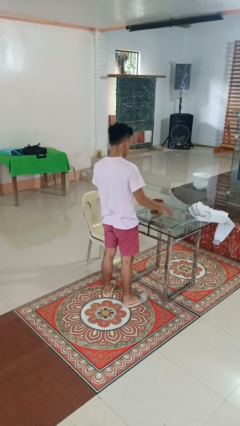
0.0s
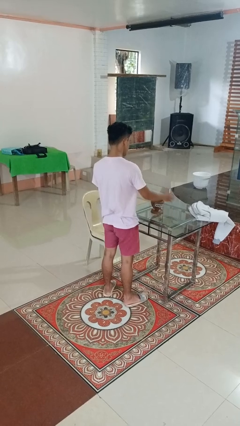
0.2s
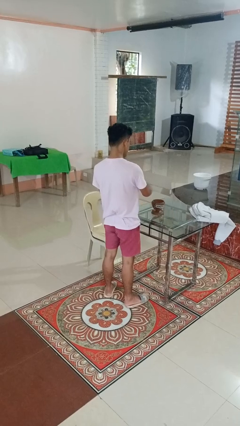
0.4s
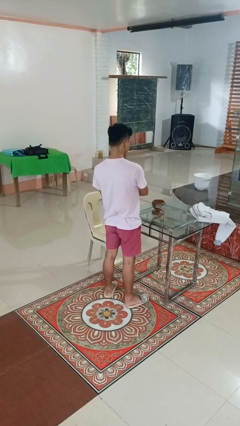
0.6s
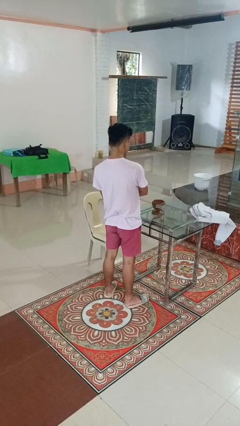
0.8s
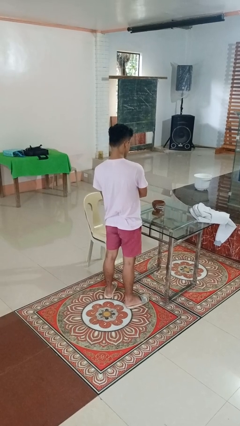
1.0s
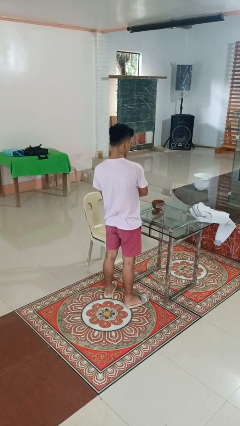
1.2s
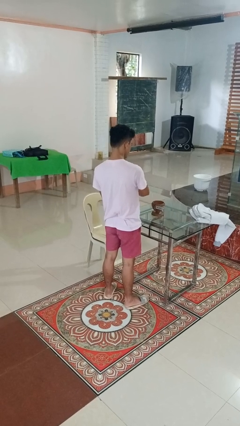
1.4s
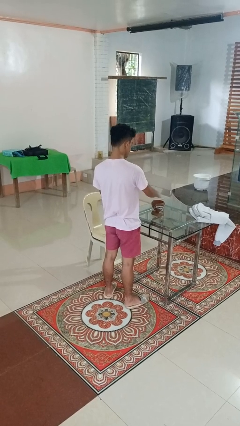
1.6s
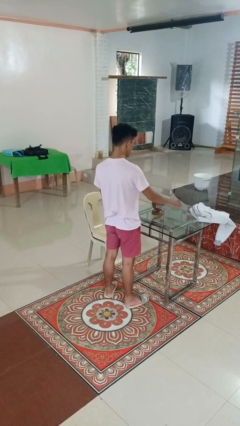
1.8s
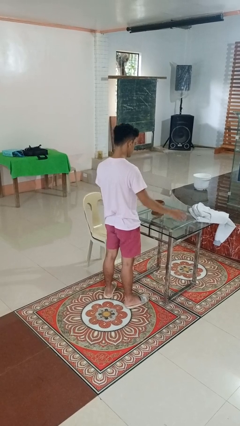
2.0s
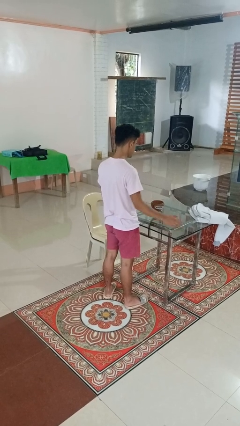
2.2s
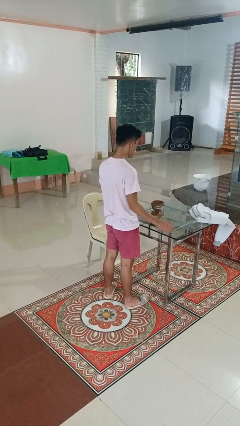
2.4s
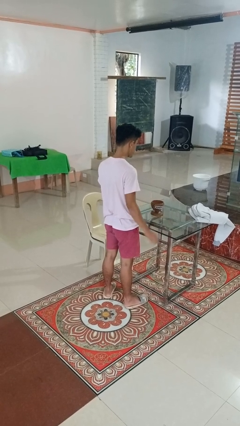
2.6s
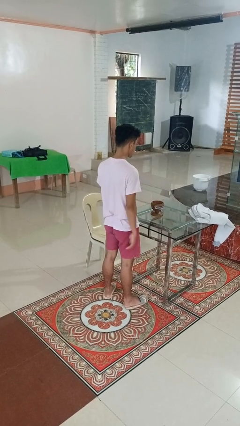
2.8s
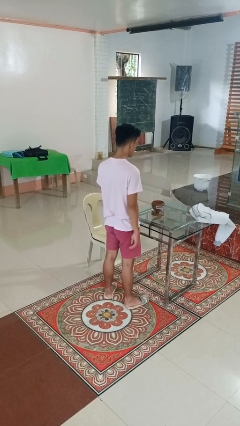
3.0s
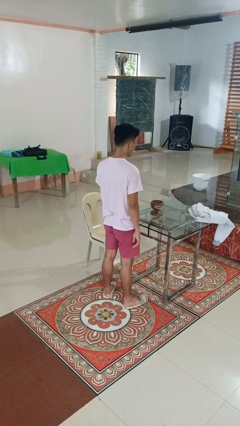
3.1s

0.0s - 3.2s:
person waves hand over object

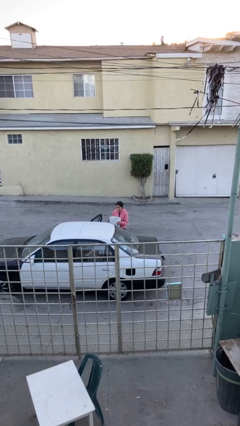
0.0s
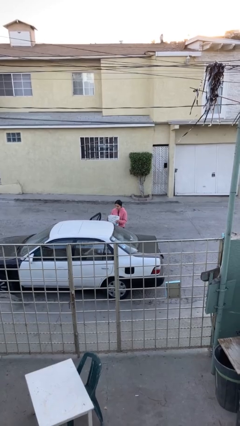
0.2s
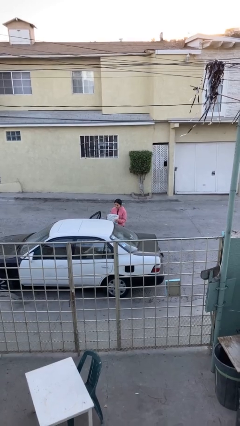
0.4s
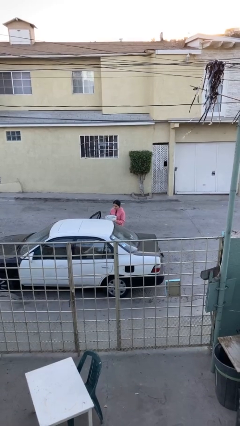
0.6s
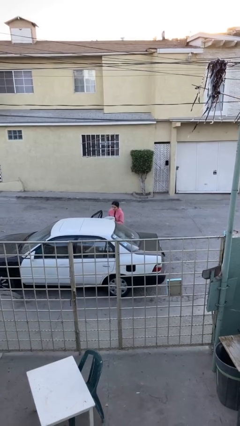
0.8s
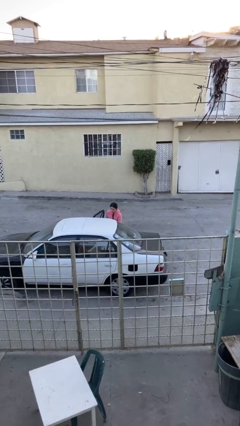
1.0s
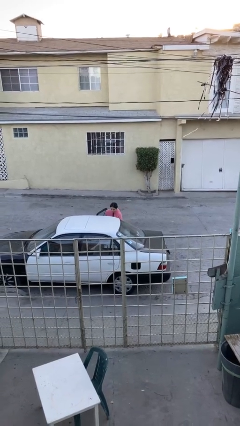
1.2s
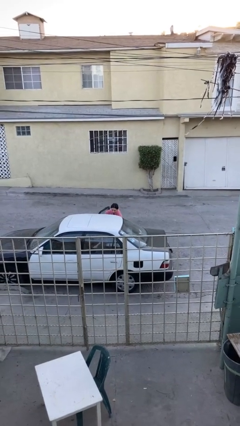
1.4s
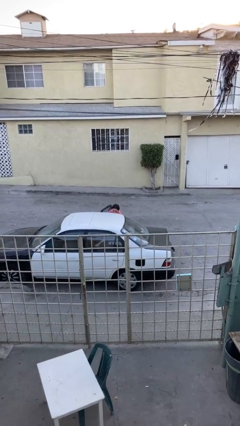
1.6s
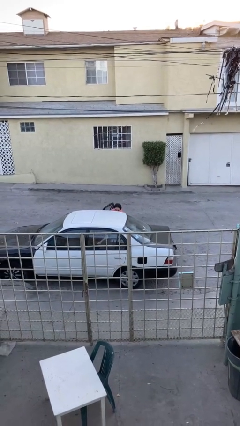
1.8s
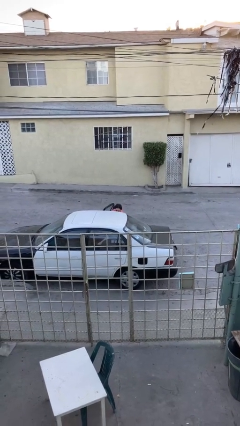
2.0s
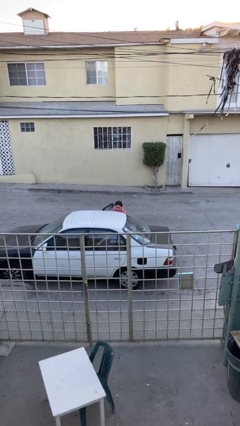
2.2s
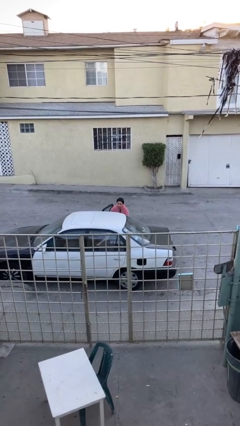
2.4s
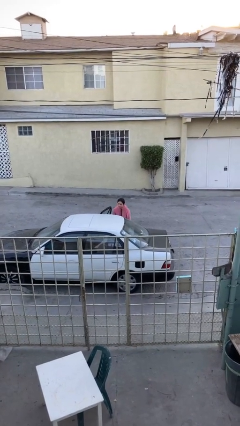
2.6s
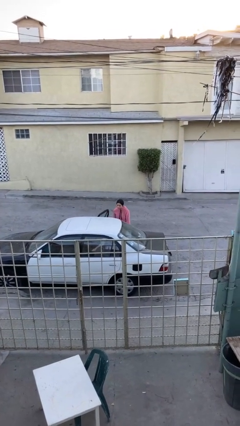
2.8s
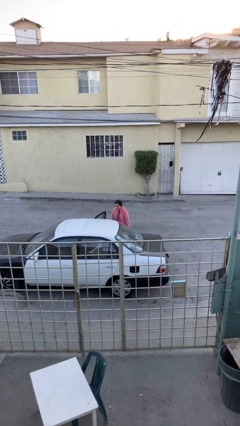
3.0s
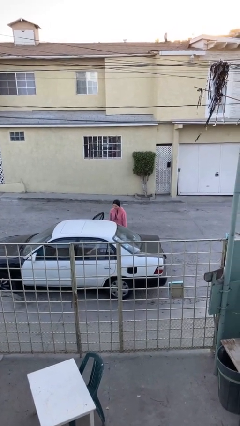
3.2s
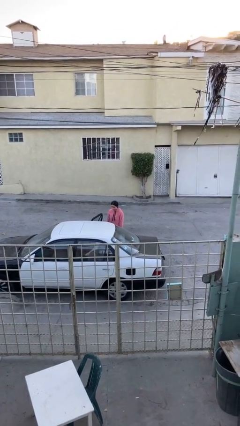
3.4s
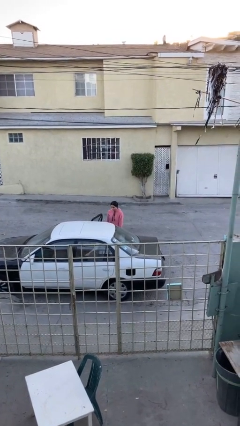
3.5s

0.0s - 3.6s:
person loads car

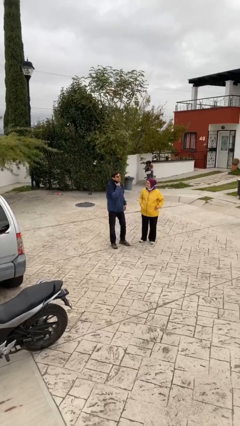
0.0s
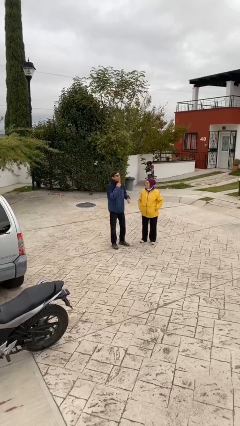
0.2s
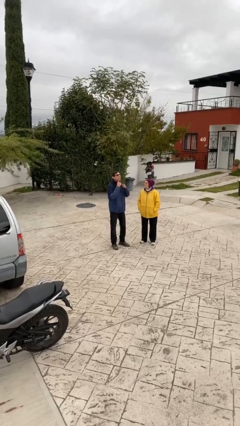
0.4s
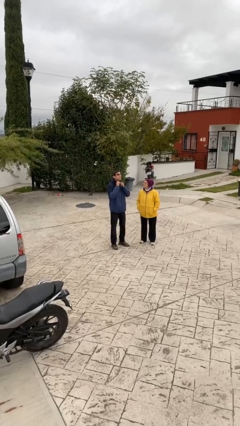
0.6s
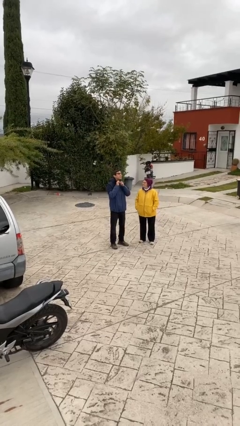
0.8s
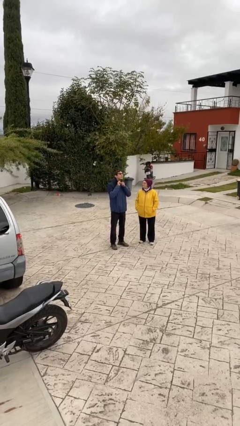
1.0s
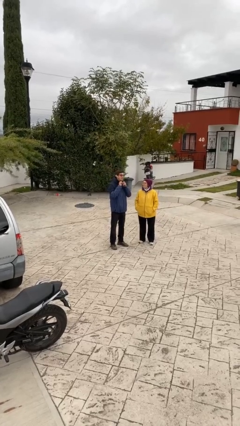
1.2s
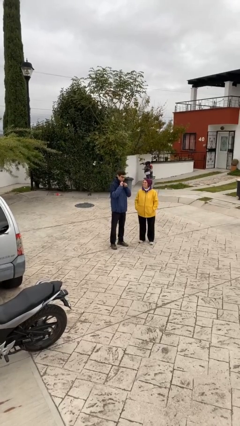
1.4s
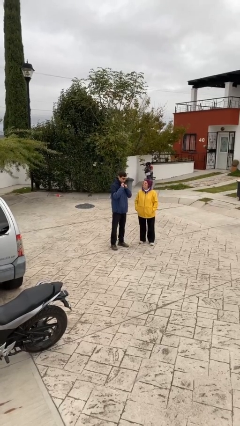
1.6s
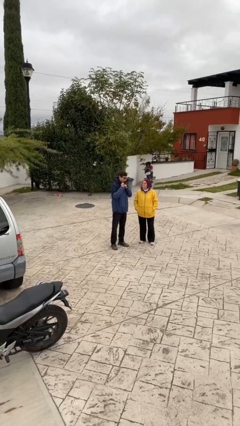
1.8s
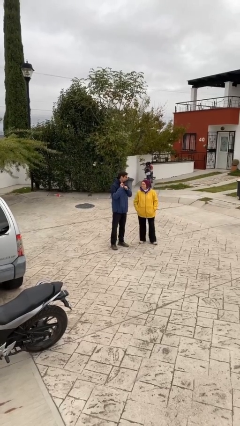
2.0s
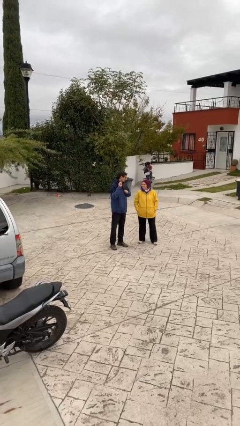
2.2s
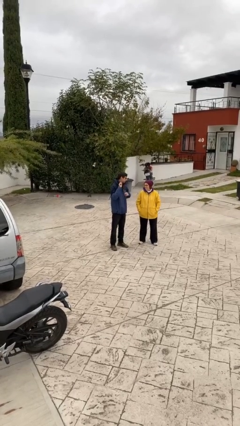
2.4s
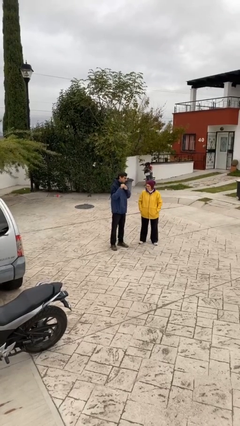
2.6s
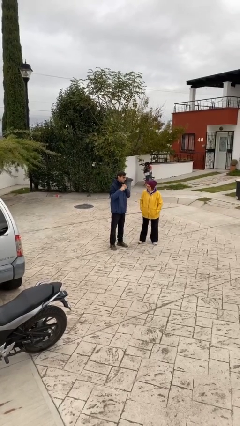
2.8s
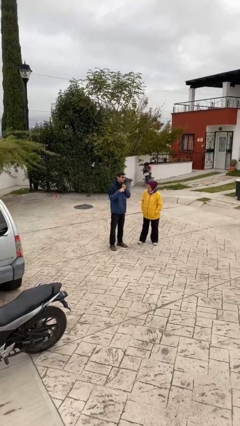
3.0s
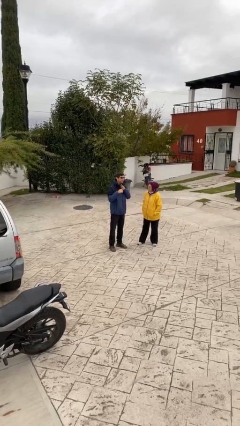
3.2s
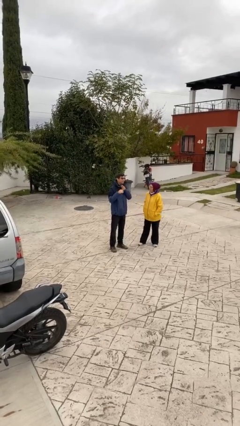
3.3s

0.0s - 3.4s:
person talks to person

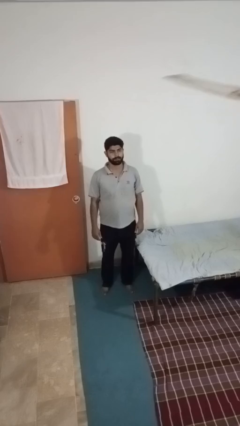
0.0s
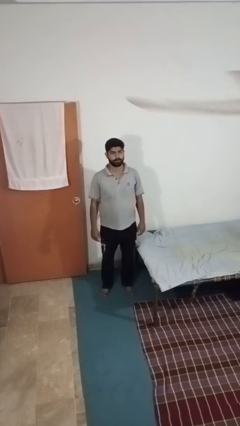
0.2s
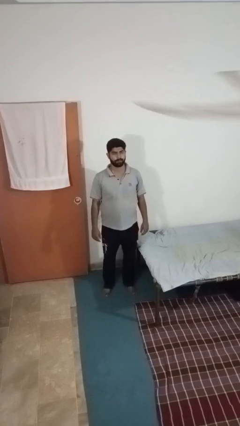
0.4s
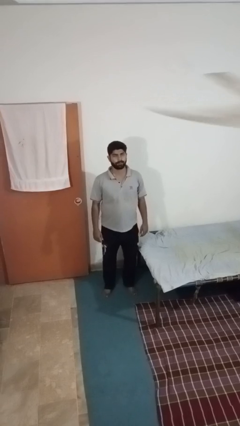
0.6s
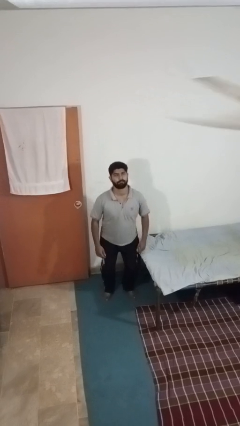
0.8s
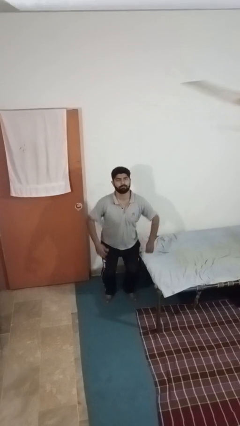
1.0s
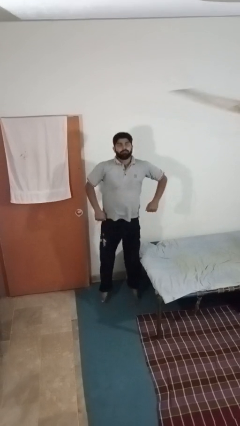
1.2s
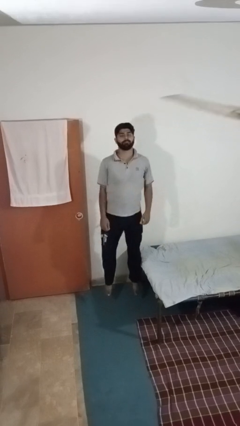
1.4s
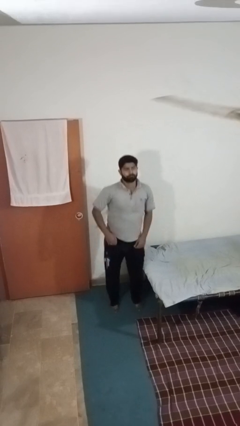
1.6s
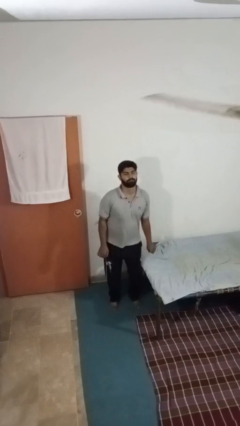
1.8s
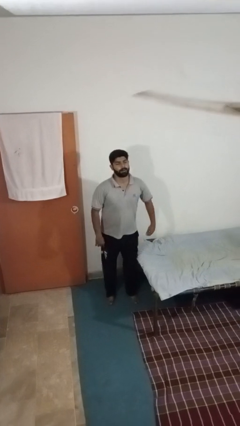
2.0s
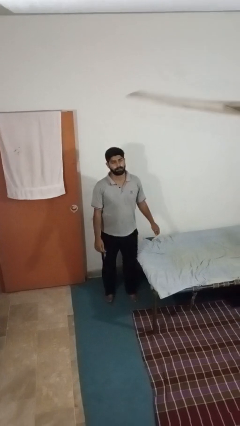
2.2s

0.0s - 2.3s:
person jumps

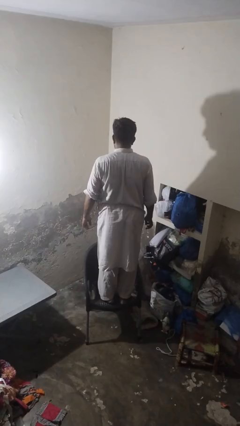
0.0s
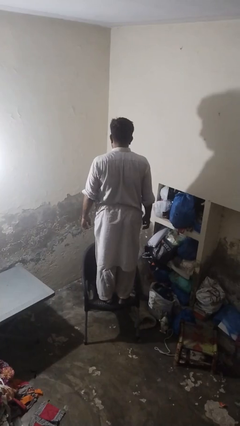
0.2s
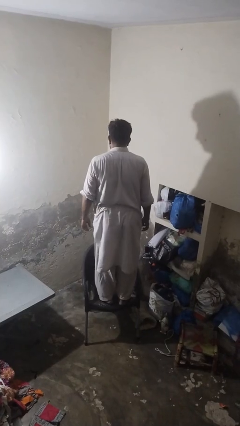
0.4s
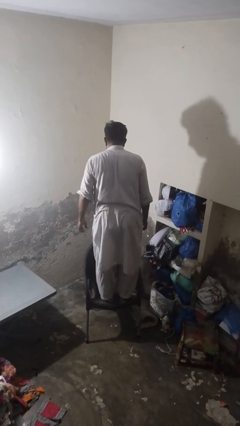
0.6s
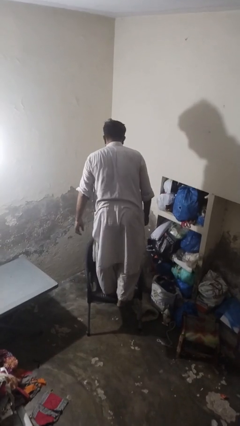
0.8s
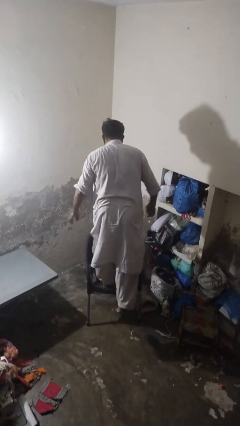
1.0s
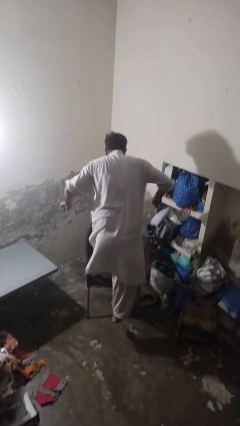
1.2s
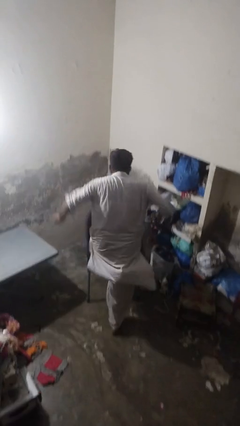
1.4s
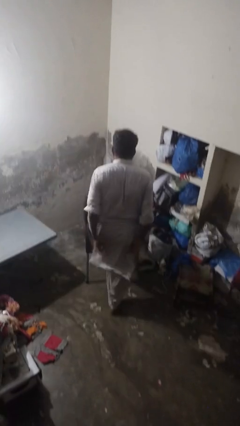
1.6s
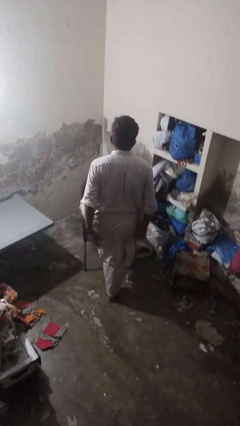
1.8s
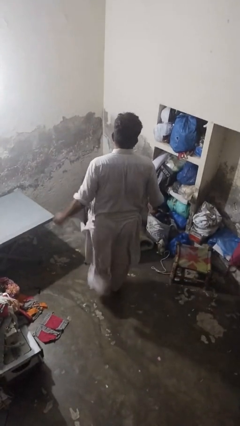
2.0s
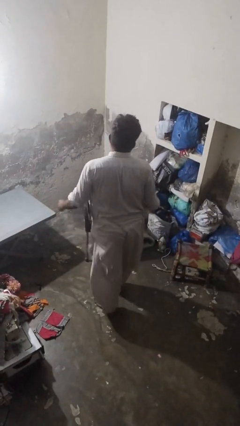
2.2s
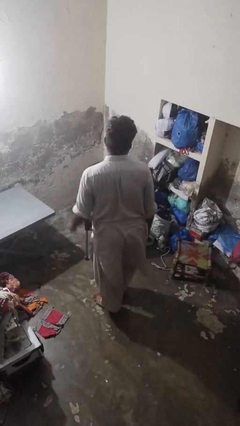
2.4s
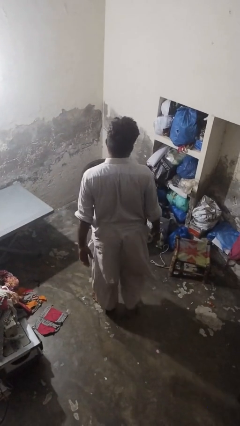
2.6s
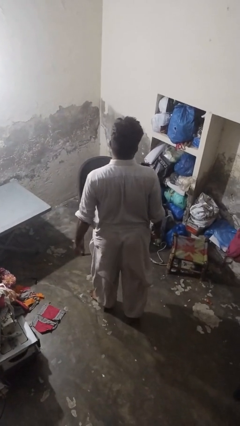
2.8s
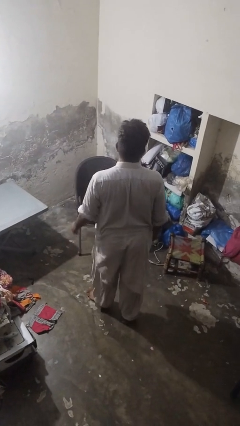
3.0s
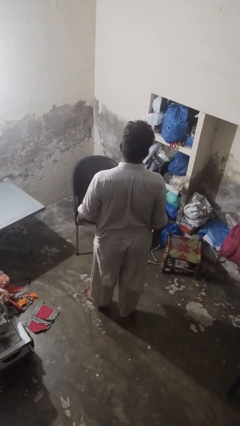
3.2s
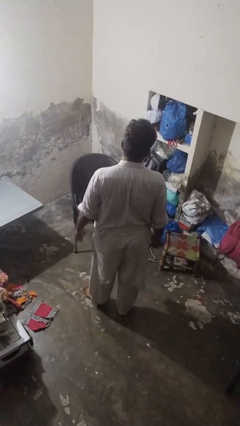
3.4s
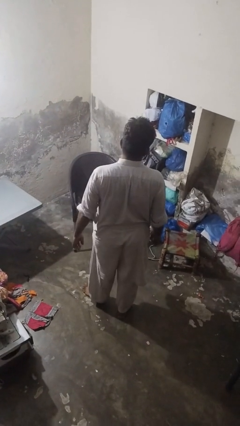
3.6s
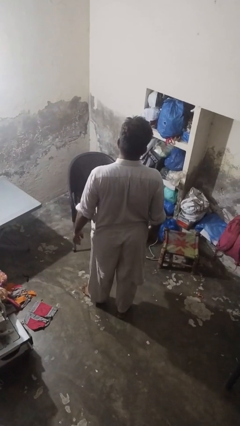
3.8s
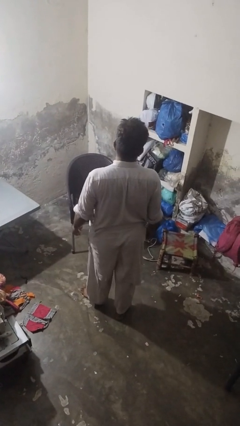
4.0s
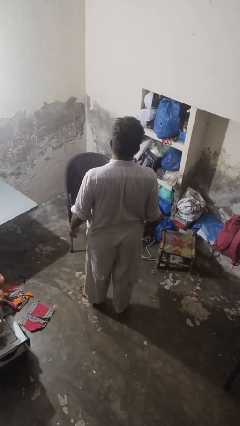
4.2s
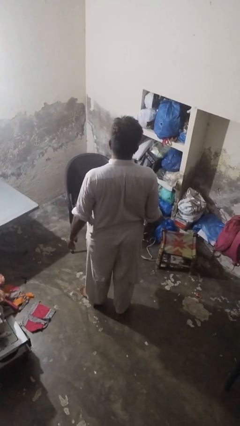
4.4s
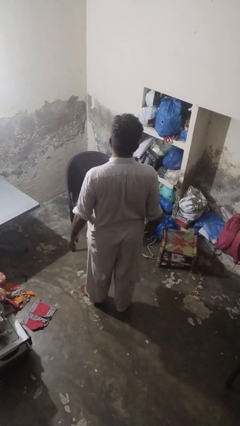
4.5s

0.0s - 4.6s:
person climbs off chair

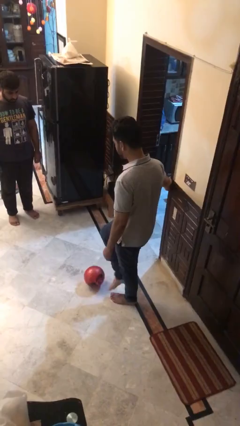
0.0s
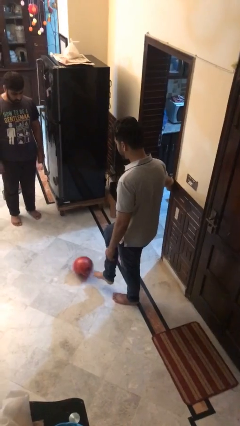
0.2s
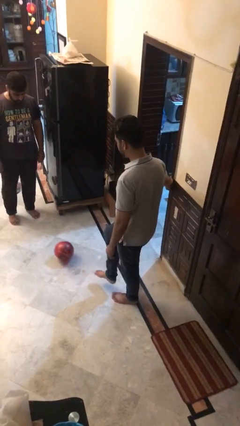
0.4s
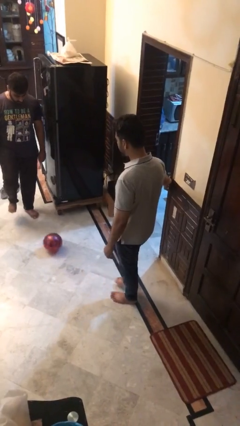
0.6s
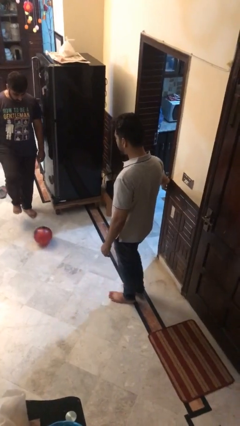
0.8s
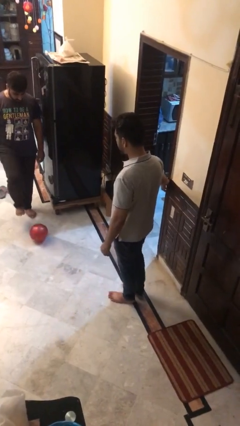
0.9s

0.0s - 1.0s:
person kicks object to person
